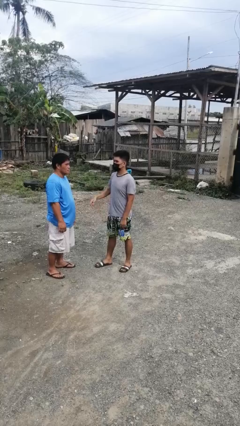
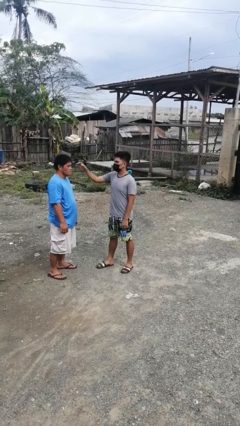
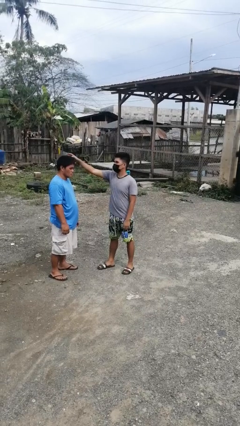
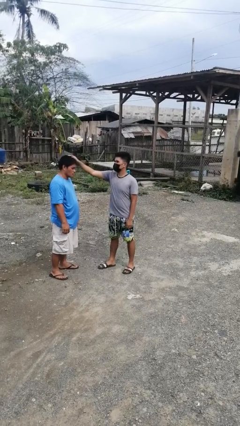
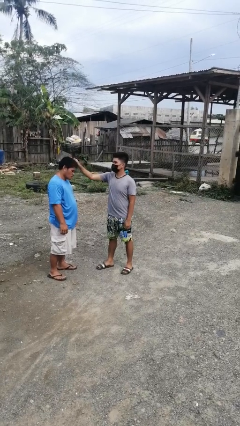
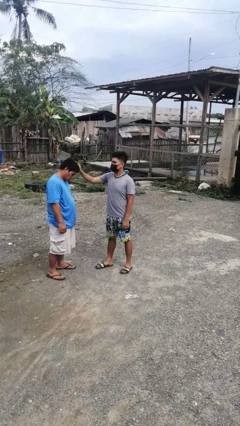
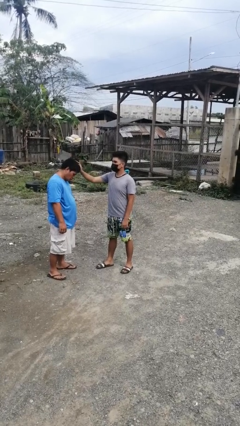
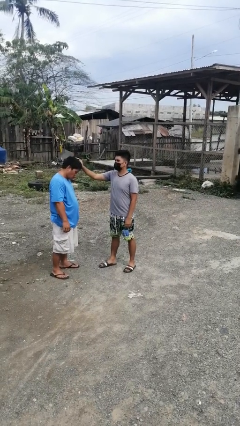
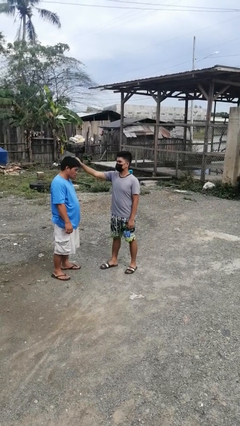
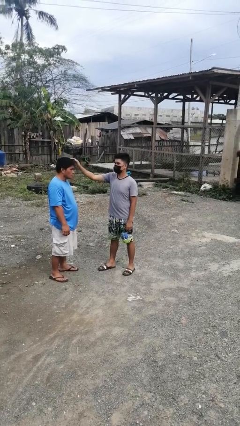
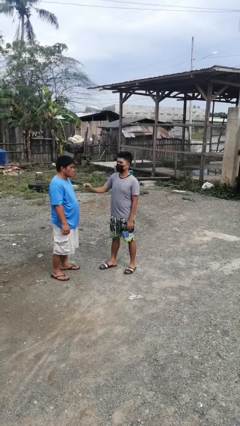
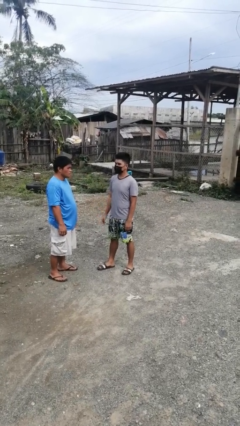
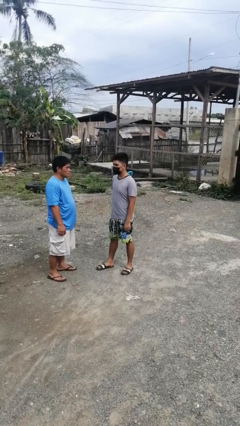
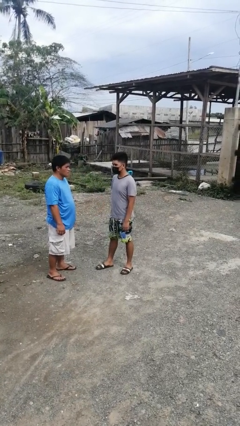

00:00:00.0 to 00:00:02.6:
person grabs person by hair

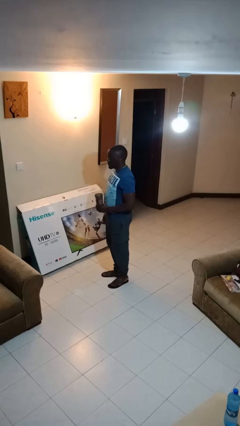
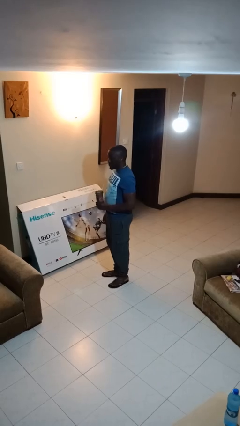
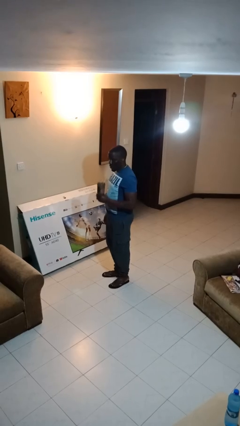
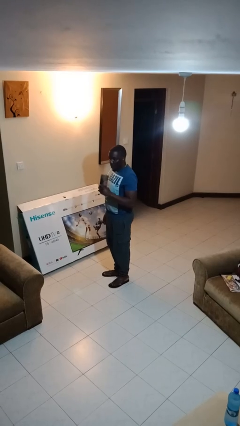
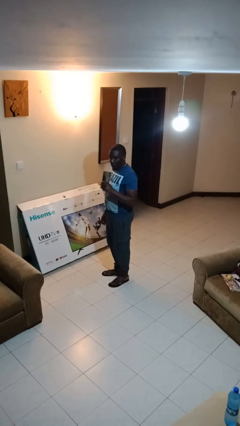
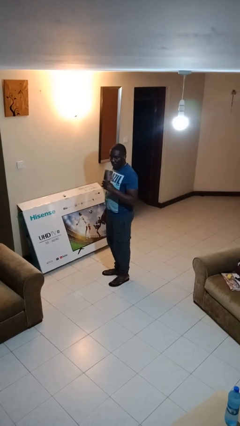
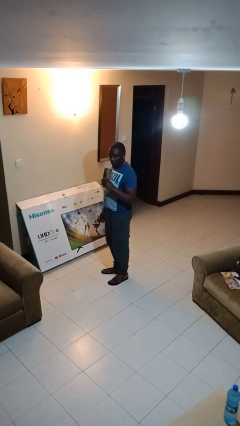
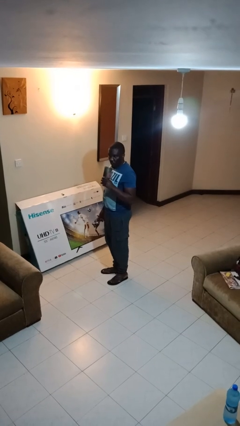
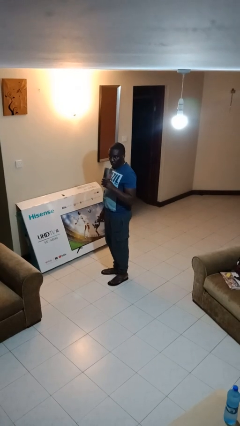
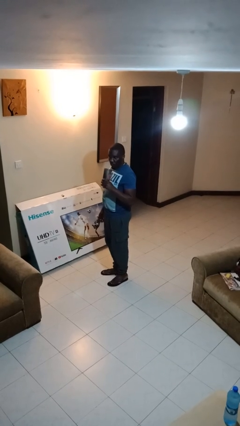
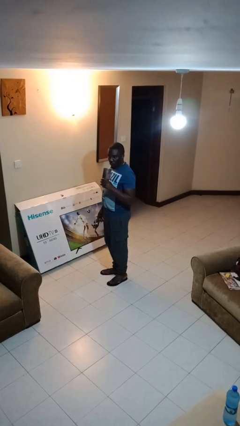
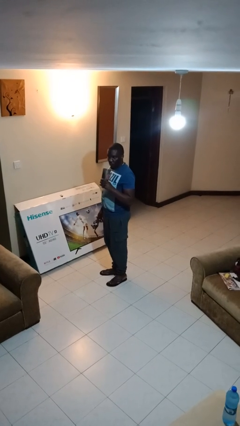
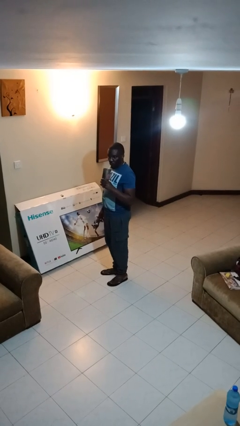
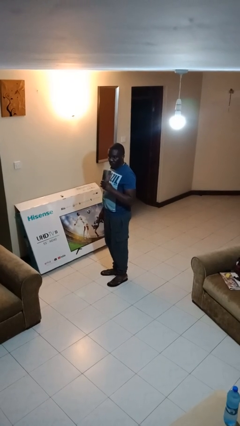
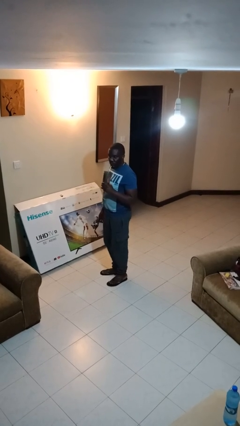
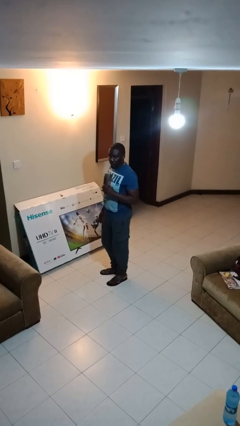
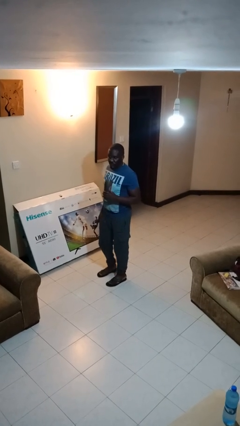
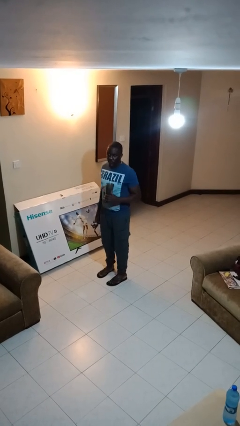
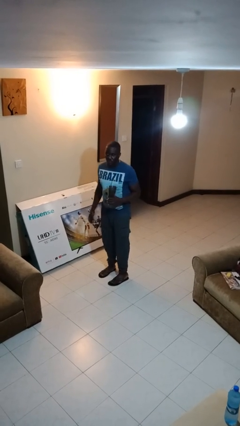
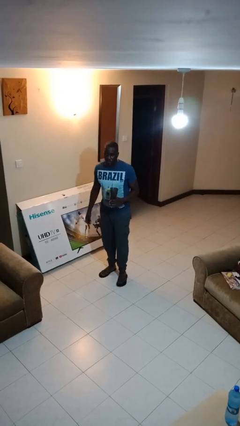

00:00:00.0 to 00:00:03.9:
person drinks from straw

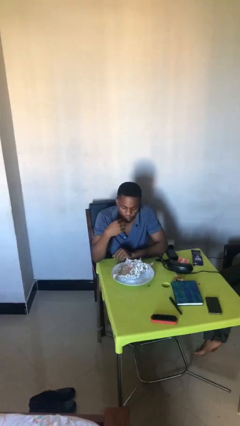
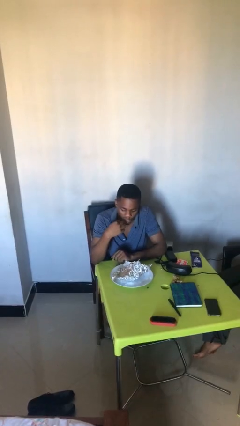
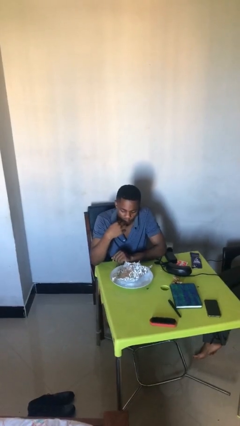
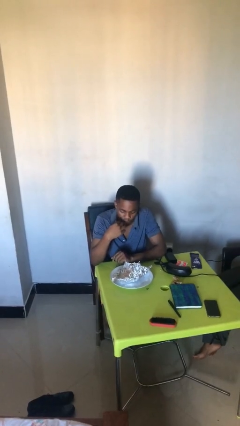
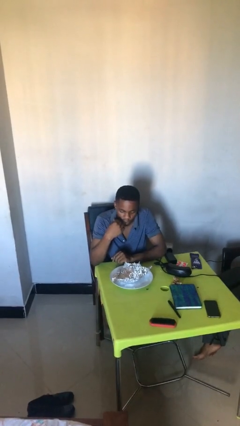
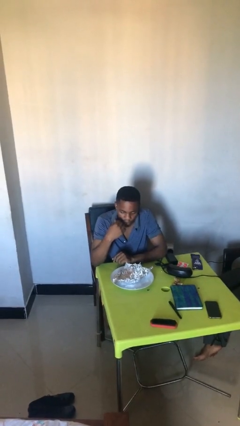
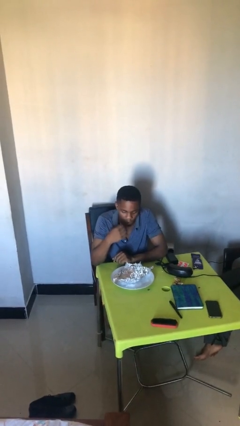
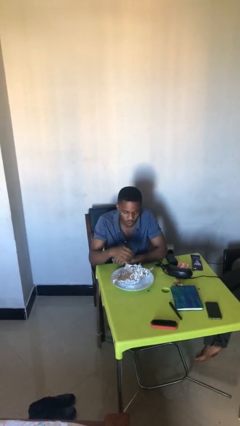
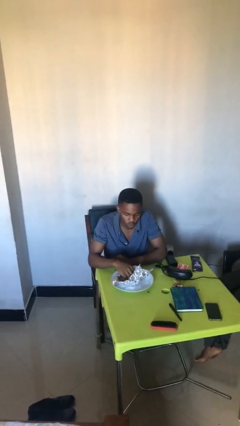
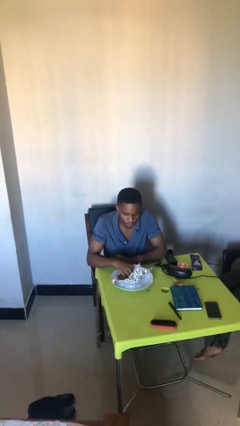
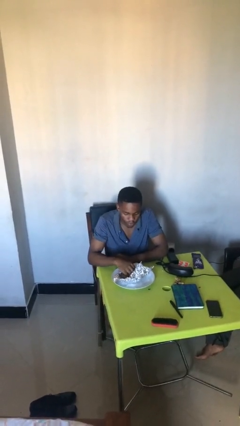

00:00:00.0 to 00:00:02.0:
person licks fingers

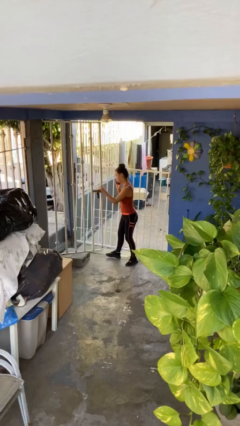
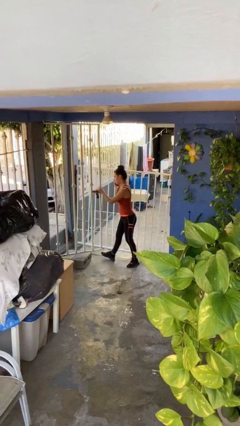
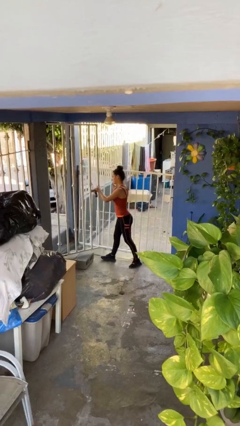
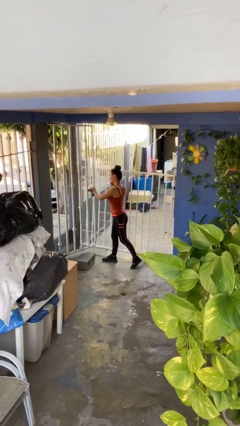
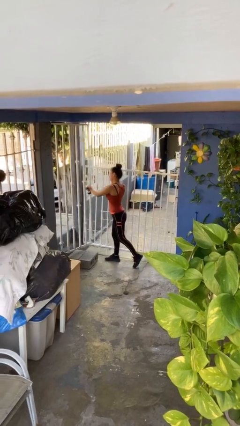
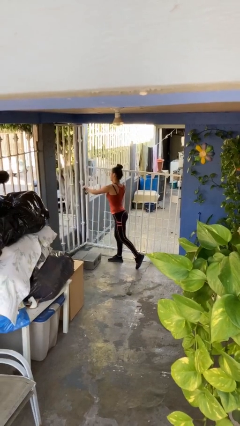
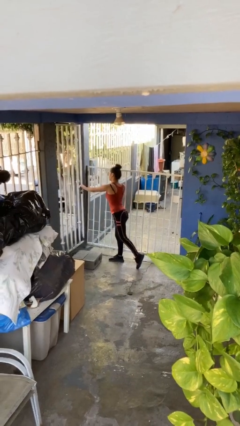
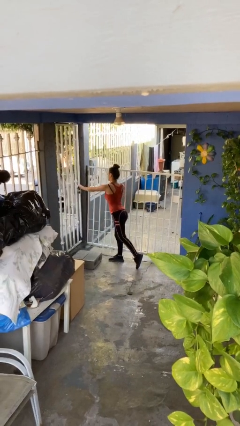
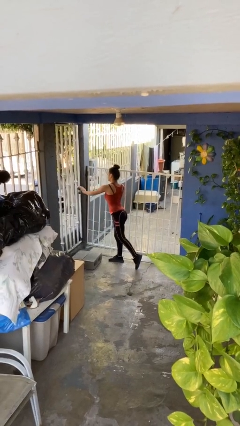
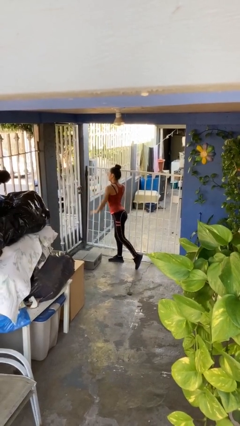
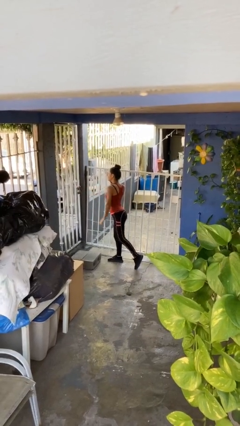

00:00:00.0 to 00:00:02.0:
person closes facility door

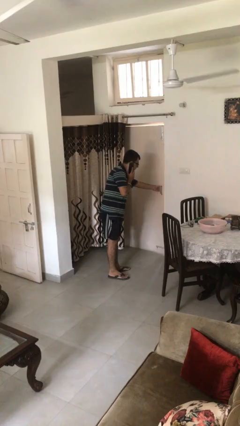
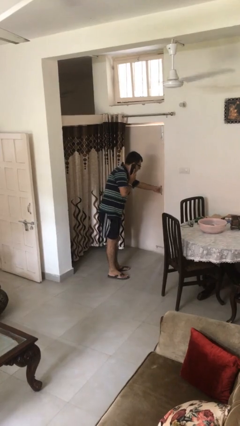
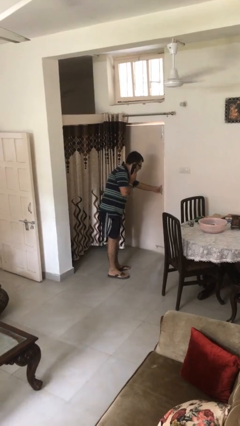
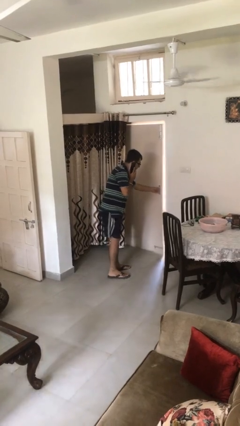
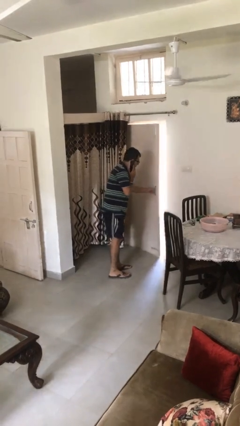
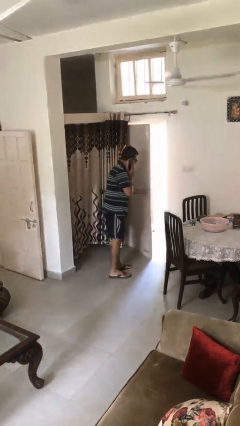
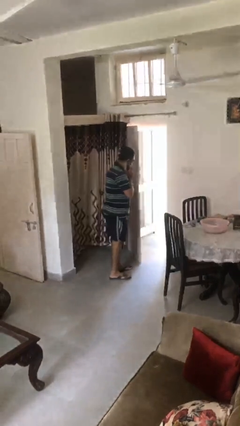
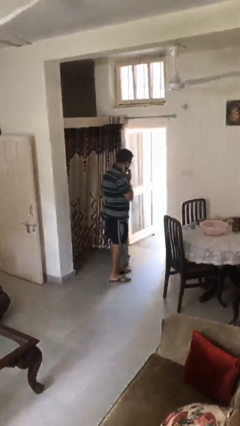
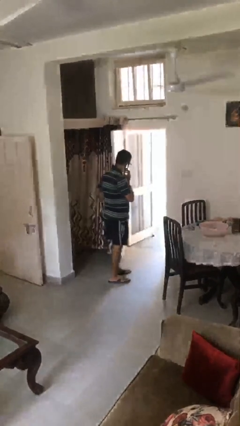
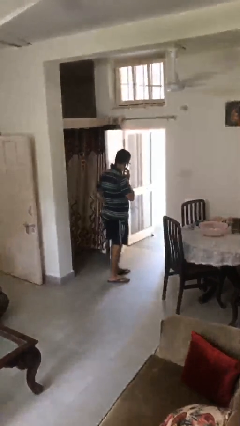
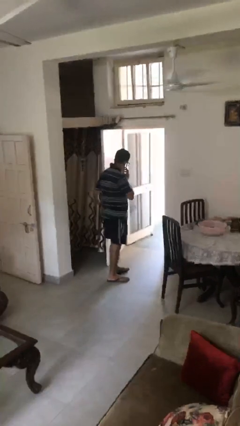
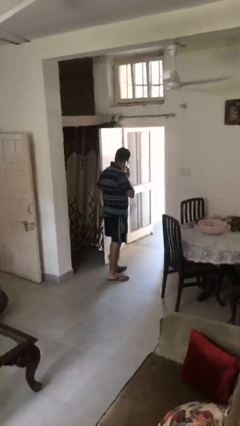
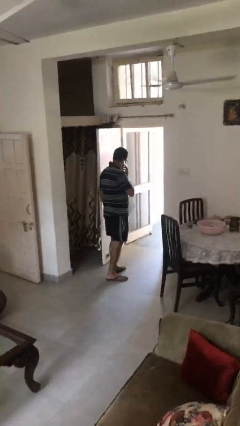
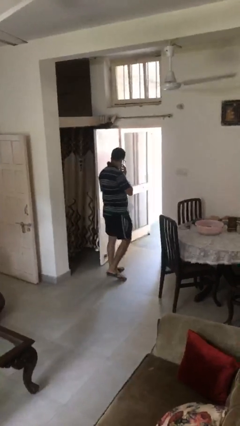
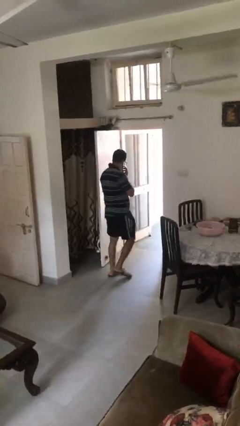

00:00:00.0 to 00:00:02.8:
person opens facility door

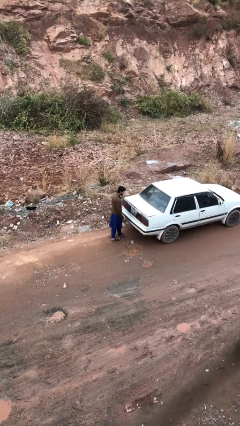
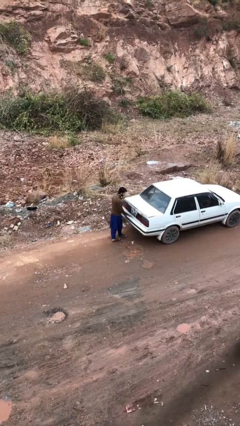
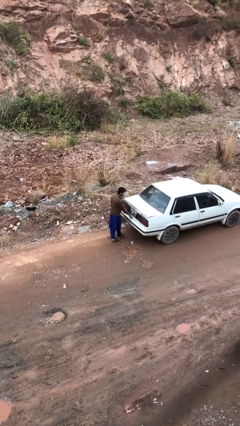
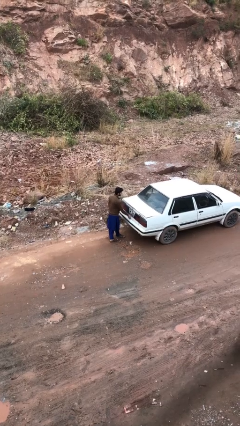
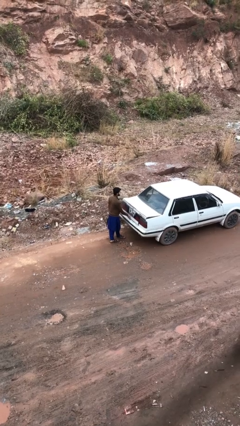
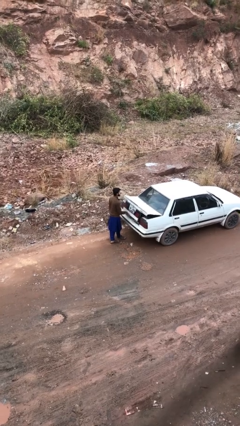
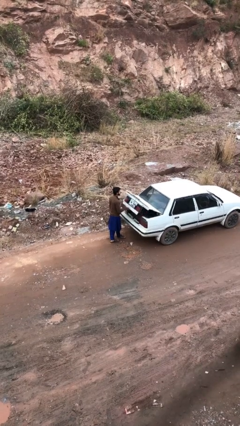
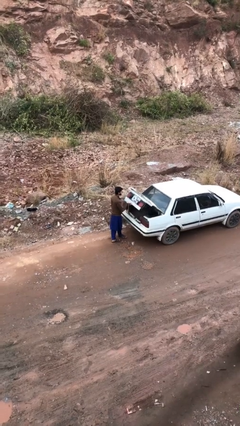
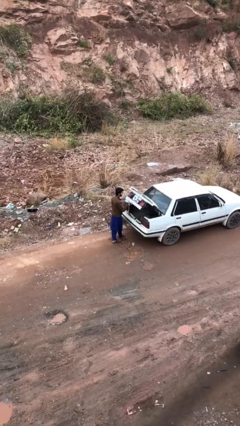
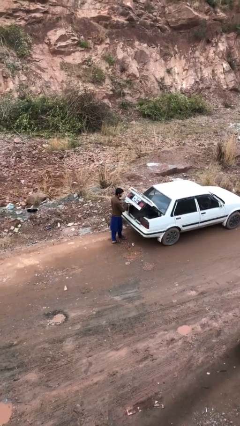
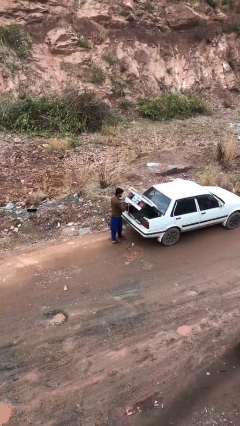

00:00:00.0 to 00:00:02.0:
person opens car trunk

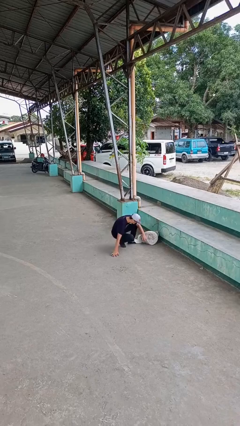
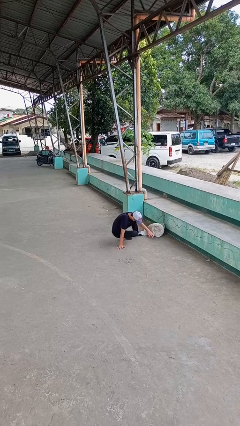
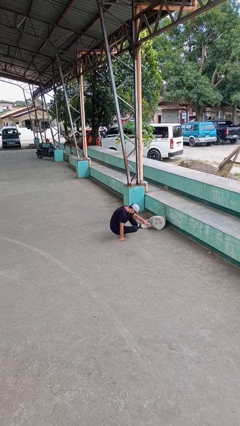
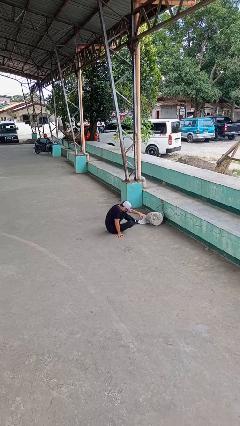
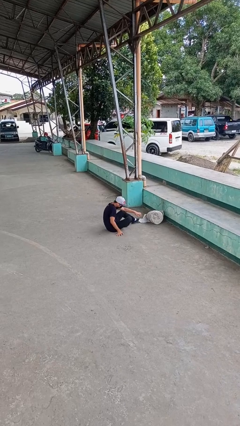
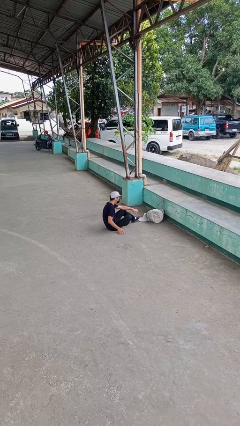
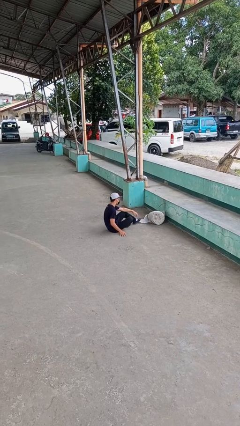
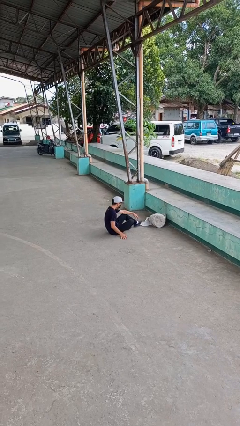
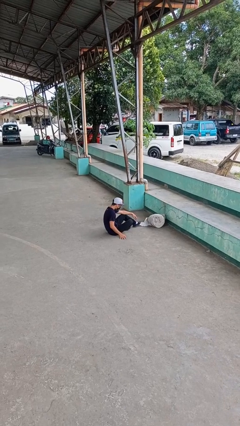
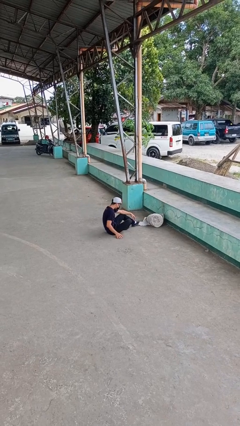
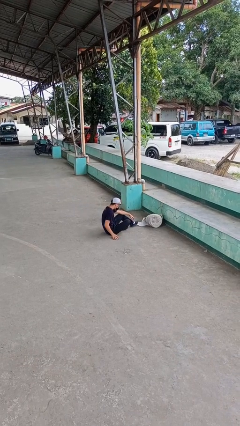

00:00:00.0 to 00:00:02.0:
person lies down on floor
